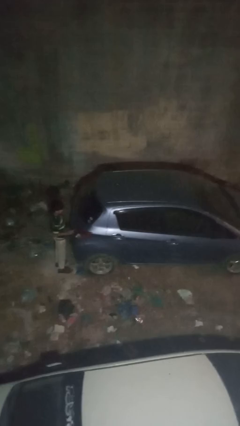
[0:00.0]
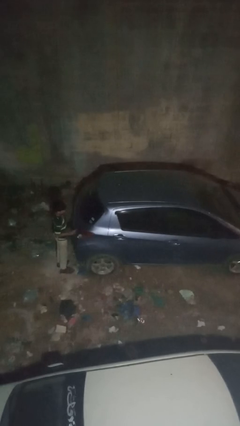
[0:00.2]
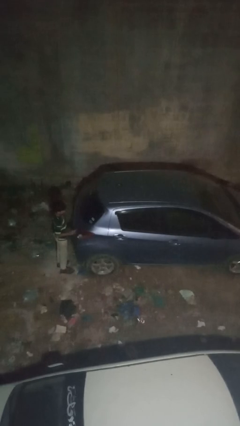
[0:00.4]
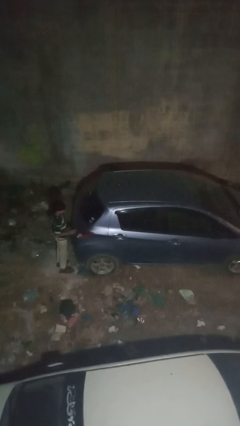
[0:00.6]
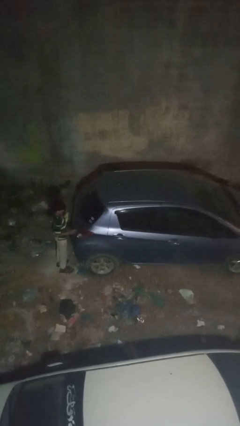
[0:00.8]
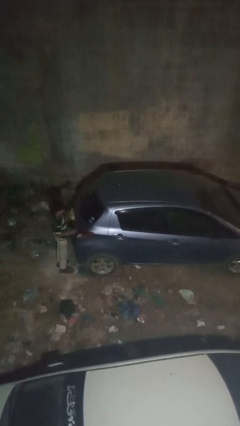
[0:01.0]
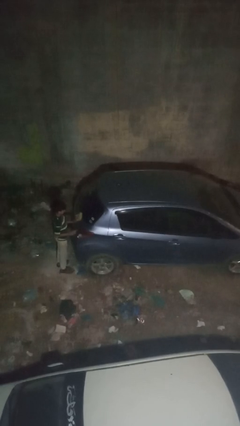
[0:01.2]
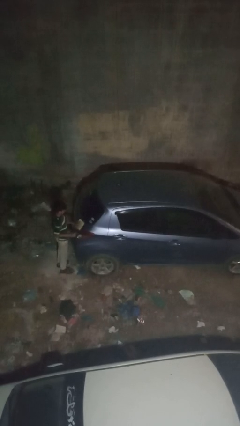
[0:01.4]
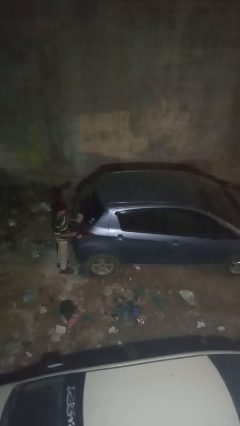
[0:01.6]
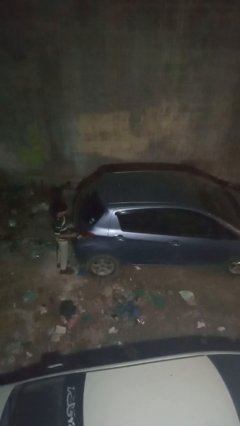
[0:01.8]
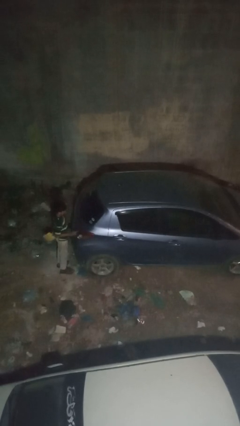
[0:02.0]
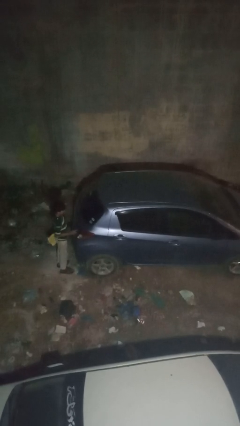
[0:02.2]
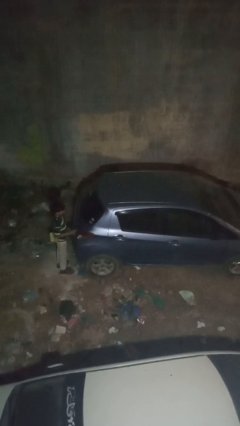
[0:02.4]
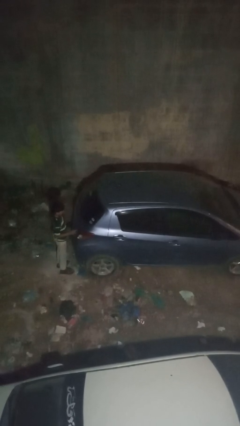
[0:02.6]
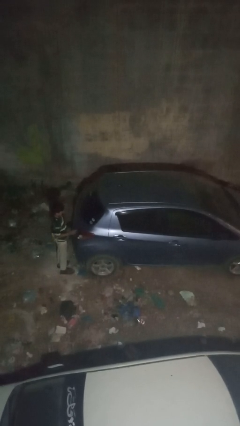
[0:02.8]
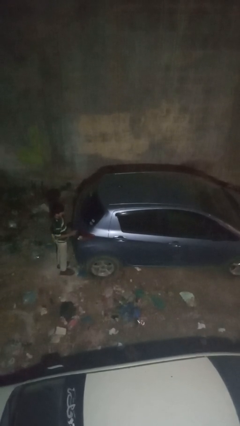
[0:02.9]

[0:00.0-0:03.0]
person polishes car with rag

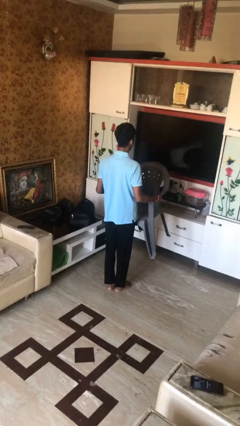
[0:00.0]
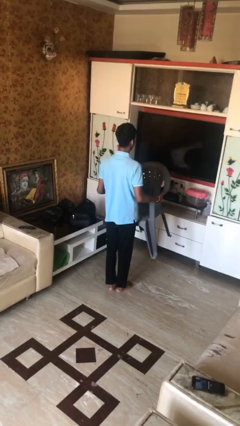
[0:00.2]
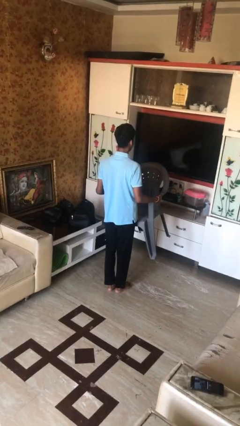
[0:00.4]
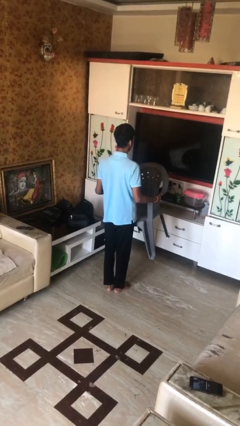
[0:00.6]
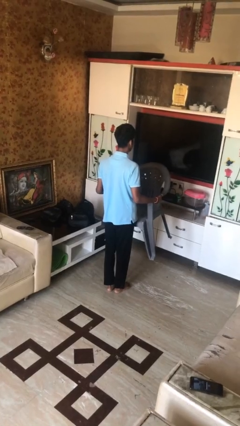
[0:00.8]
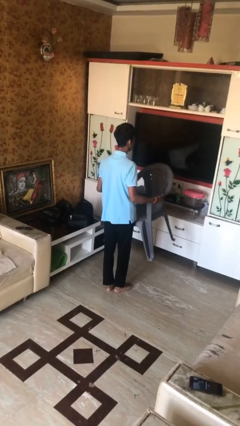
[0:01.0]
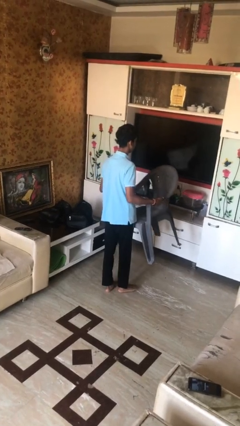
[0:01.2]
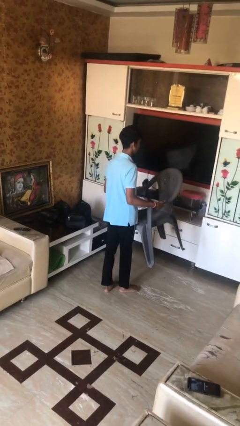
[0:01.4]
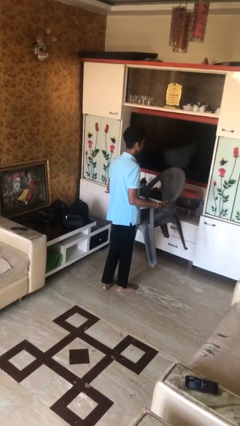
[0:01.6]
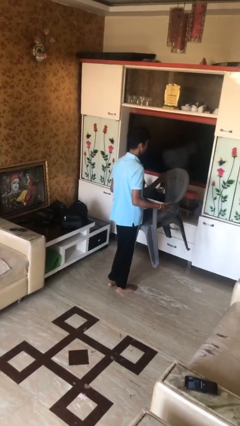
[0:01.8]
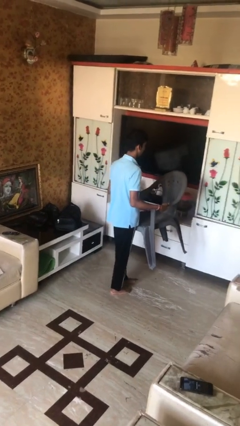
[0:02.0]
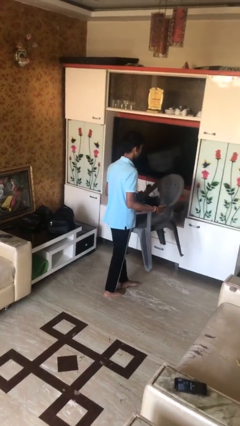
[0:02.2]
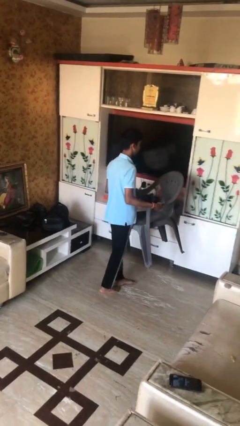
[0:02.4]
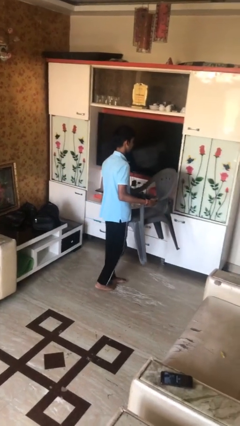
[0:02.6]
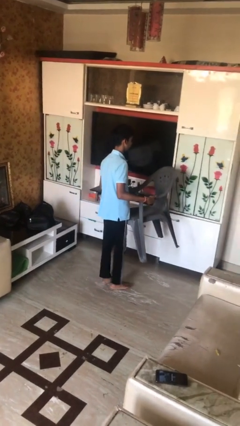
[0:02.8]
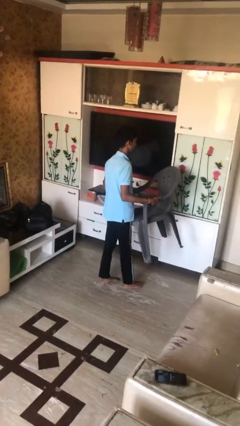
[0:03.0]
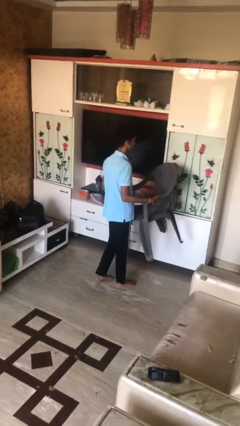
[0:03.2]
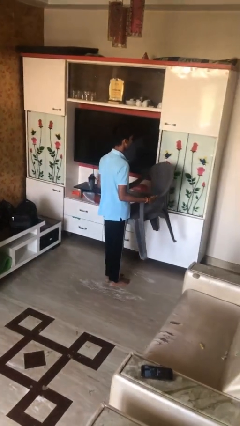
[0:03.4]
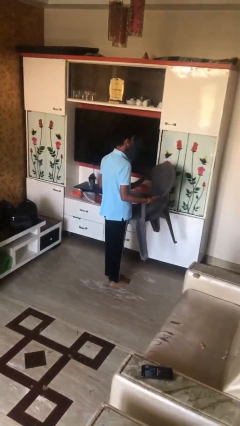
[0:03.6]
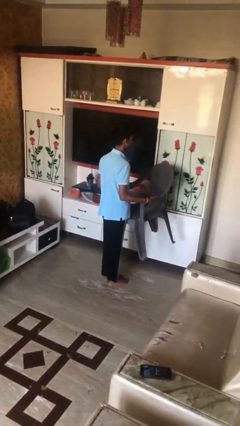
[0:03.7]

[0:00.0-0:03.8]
person carries furniture

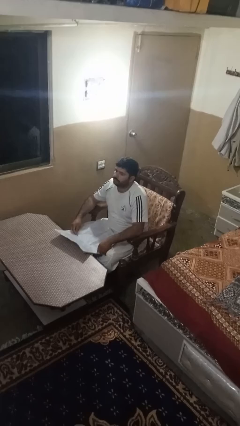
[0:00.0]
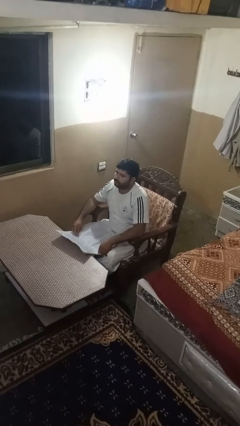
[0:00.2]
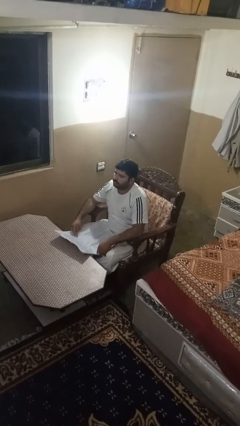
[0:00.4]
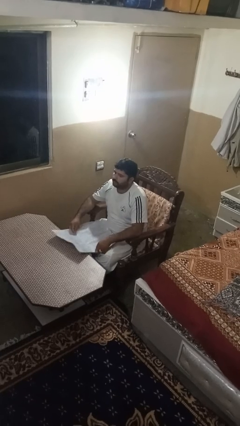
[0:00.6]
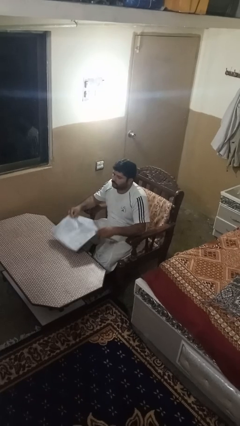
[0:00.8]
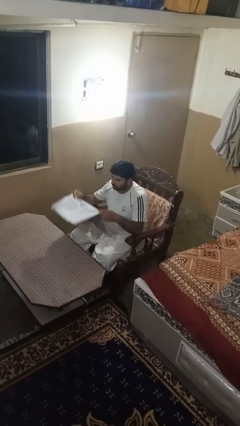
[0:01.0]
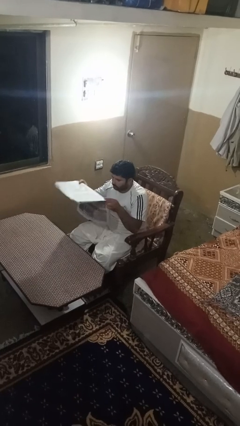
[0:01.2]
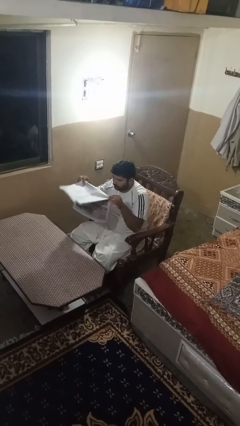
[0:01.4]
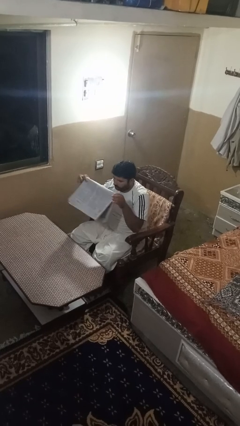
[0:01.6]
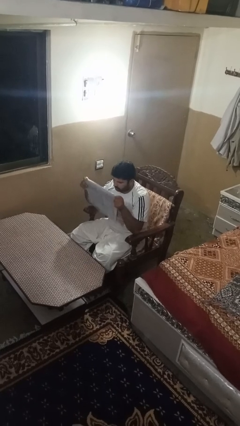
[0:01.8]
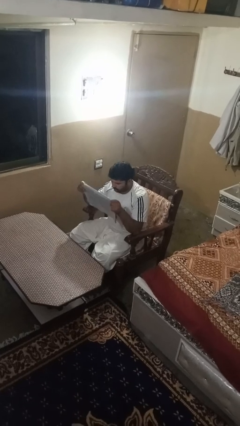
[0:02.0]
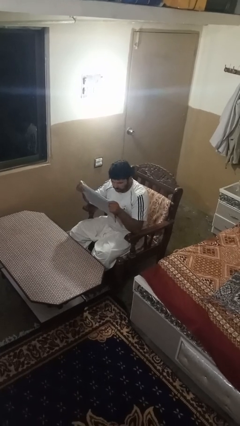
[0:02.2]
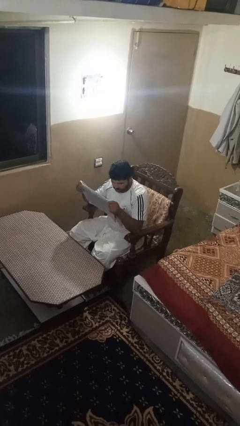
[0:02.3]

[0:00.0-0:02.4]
person reads newspaper

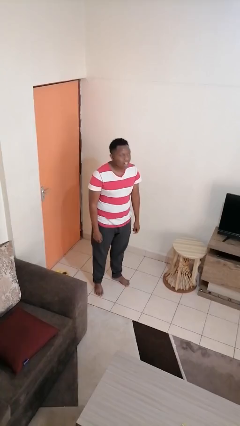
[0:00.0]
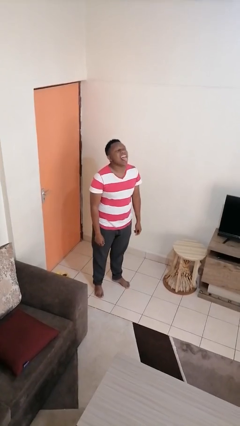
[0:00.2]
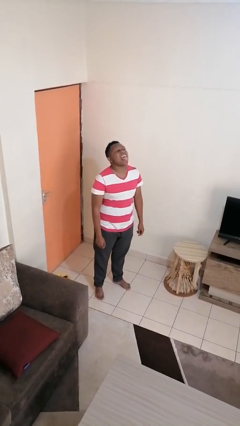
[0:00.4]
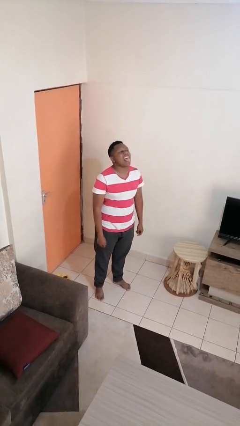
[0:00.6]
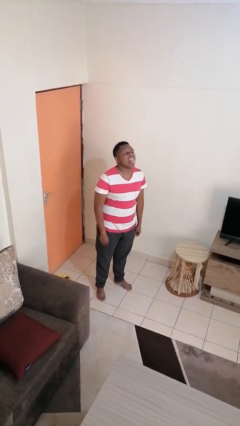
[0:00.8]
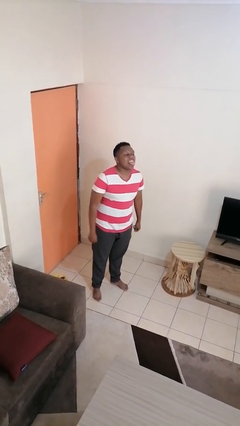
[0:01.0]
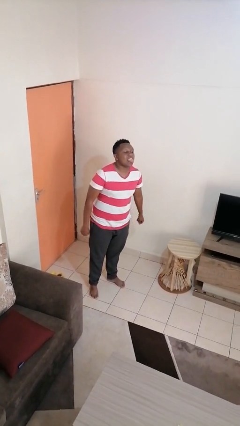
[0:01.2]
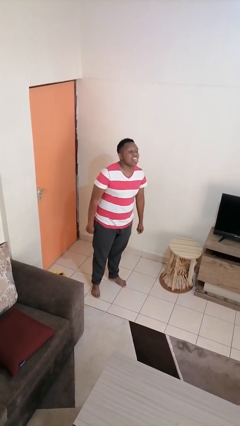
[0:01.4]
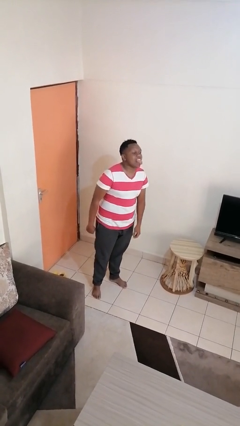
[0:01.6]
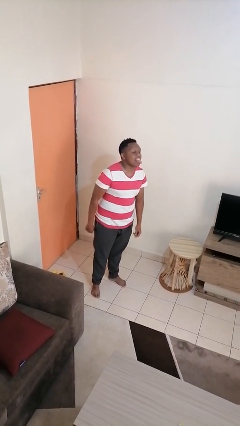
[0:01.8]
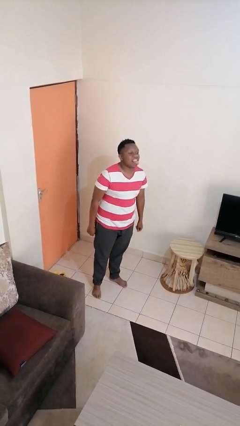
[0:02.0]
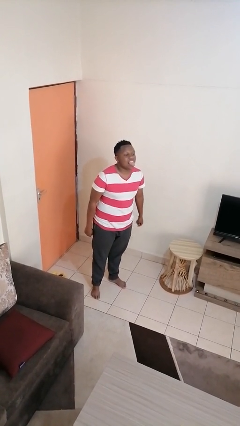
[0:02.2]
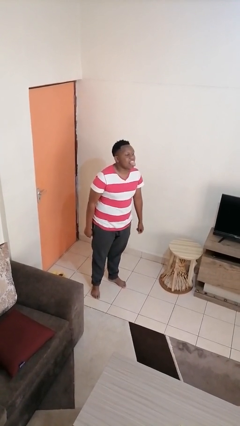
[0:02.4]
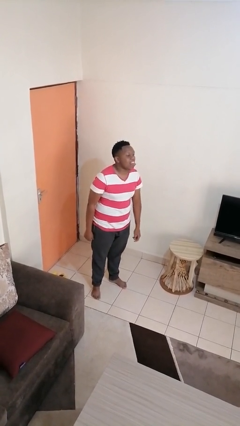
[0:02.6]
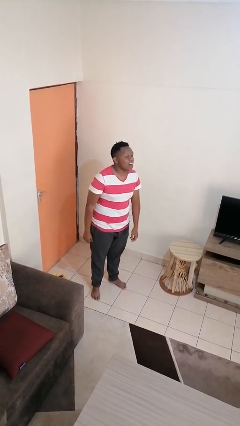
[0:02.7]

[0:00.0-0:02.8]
person sticks out tongue

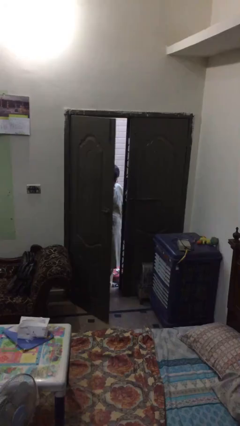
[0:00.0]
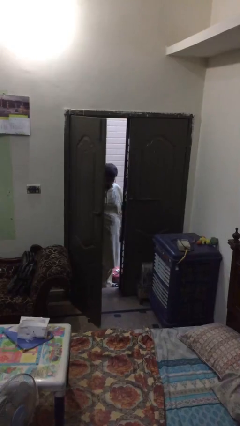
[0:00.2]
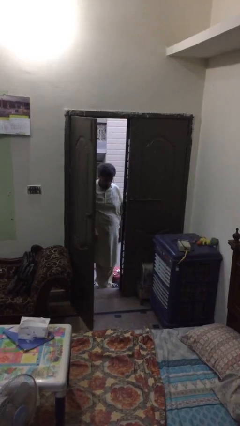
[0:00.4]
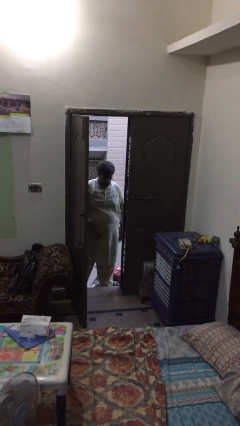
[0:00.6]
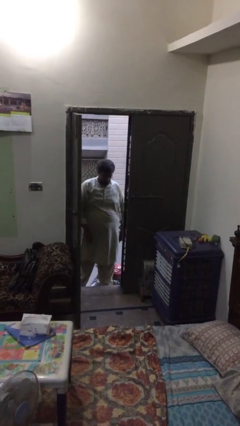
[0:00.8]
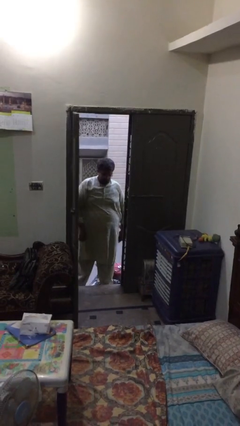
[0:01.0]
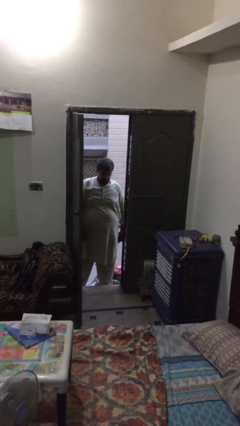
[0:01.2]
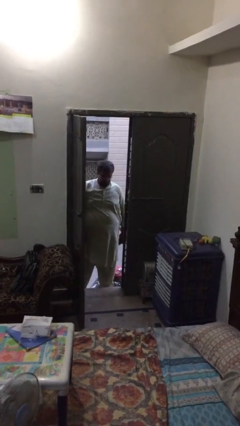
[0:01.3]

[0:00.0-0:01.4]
person opens facility door

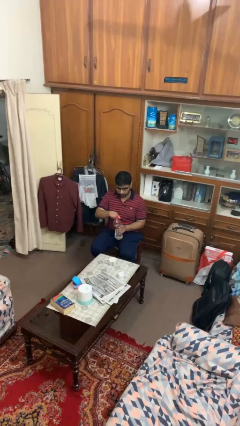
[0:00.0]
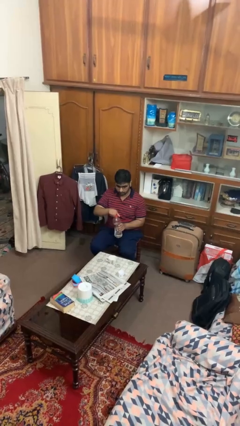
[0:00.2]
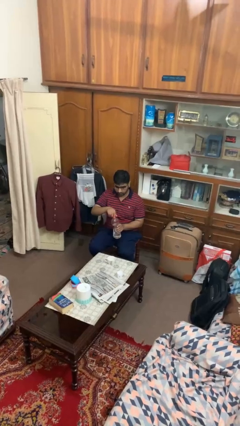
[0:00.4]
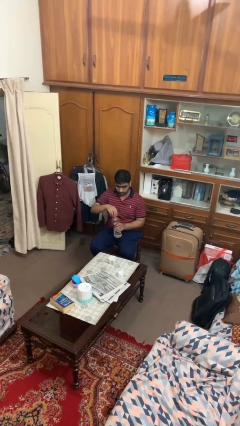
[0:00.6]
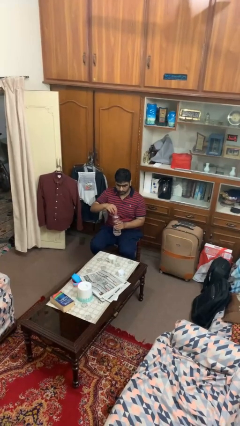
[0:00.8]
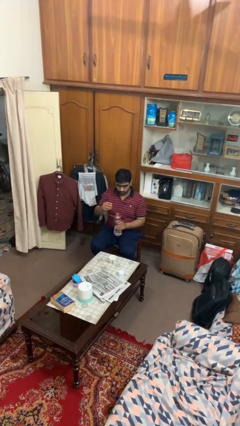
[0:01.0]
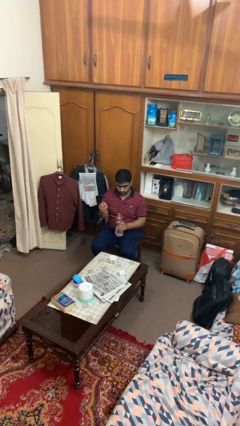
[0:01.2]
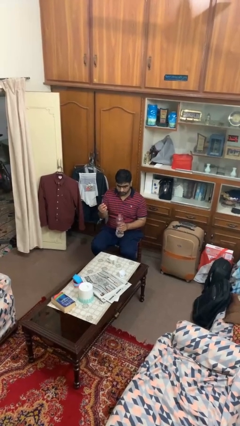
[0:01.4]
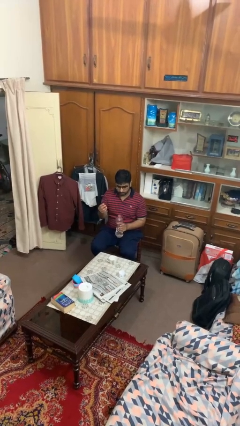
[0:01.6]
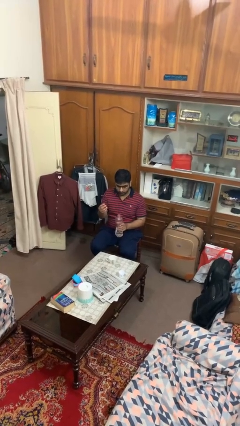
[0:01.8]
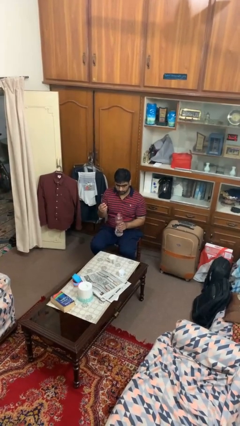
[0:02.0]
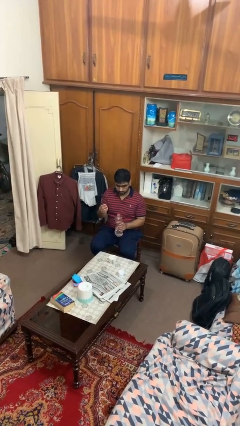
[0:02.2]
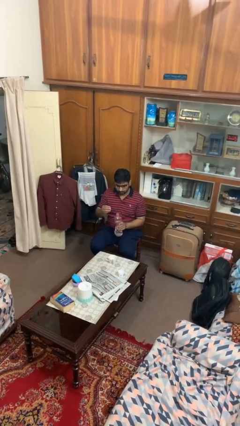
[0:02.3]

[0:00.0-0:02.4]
person unscrews lid from bottle

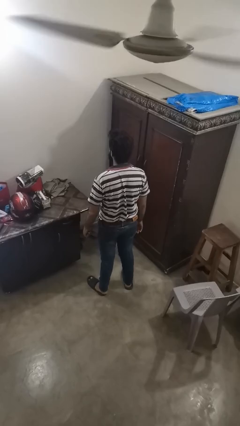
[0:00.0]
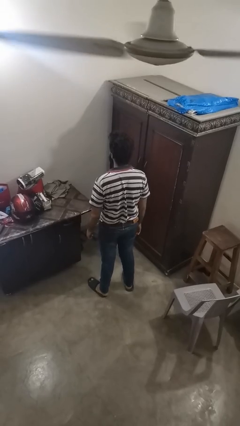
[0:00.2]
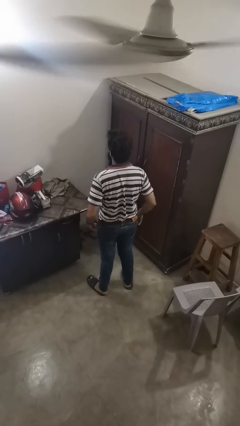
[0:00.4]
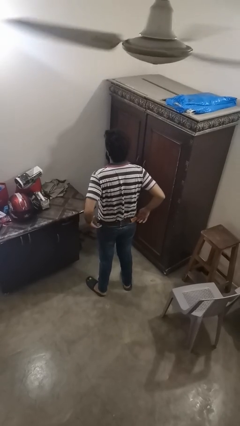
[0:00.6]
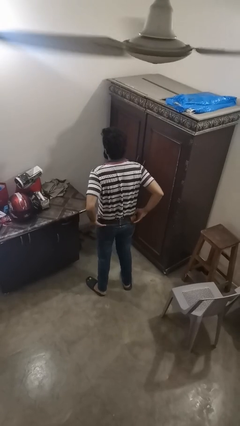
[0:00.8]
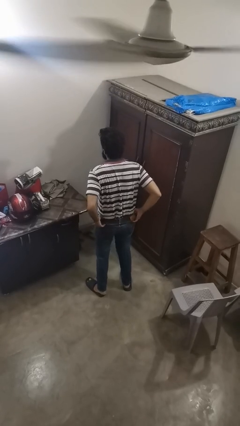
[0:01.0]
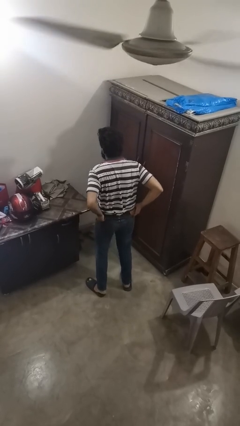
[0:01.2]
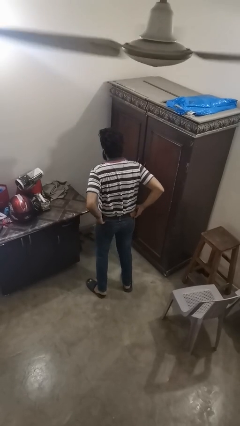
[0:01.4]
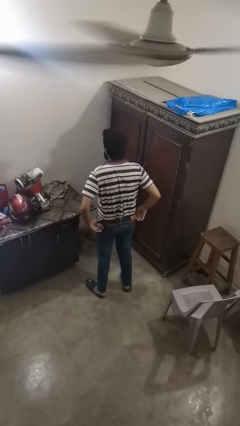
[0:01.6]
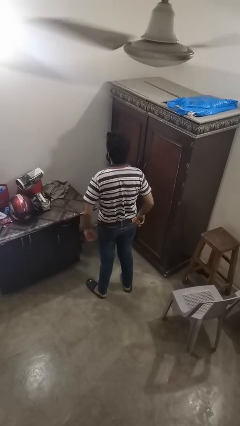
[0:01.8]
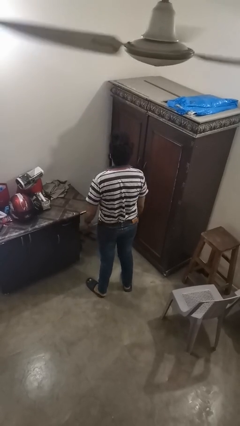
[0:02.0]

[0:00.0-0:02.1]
person hikes up pants
